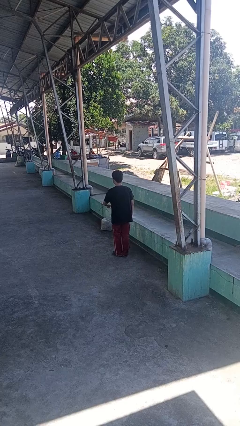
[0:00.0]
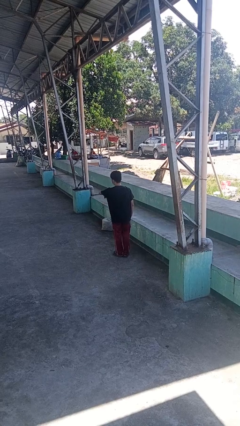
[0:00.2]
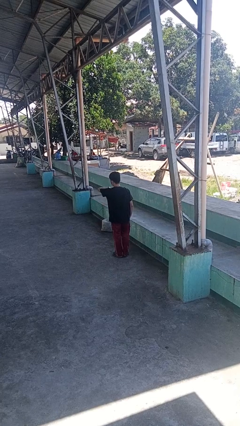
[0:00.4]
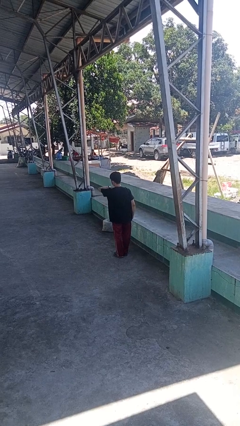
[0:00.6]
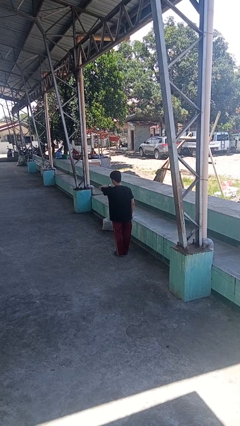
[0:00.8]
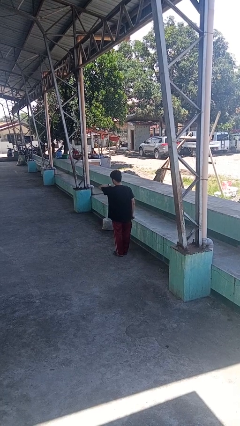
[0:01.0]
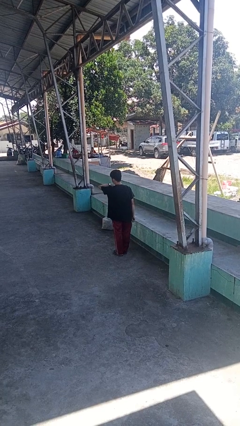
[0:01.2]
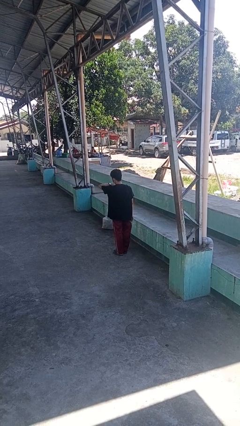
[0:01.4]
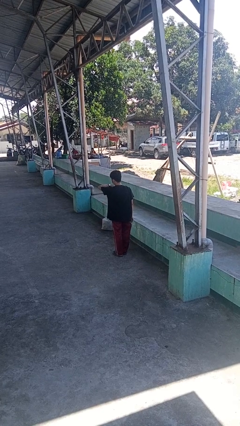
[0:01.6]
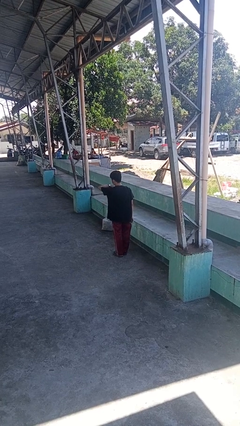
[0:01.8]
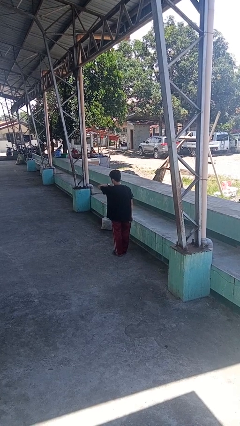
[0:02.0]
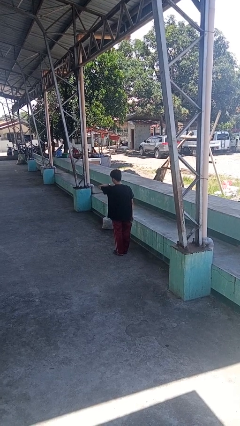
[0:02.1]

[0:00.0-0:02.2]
person looks at wristwatch

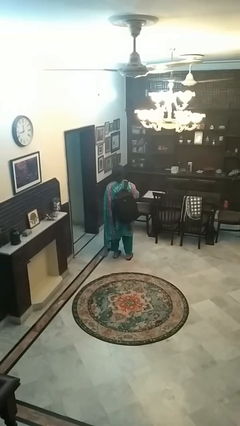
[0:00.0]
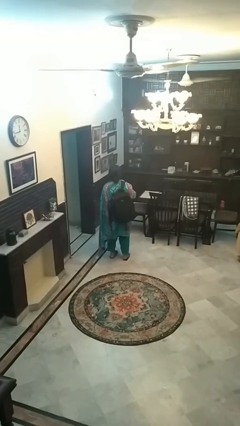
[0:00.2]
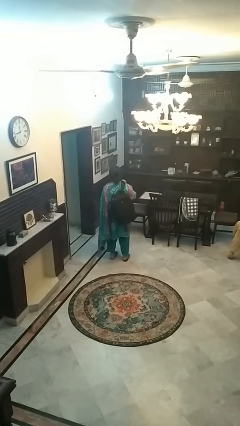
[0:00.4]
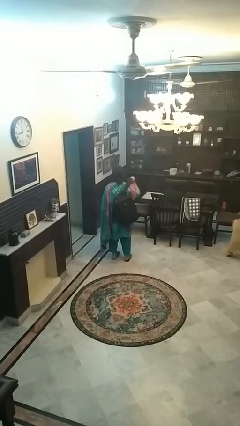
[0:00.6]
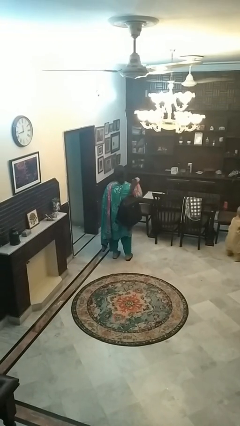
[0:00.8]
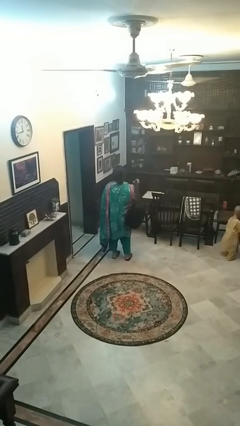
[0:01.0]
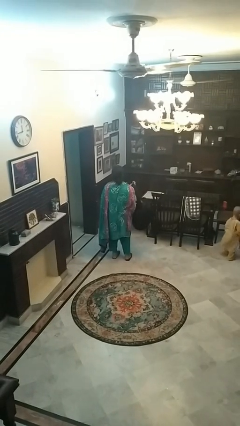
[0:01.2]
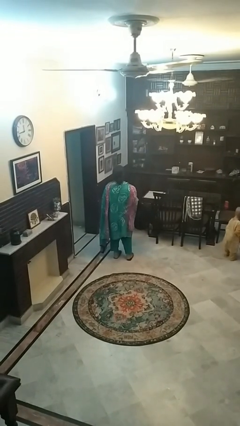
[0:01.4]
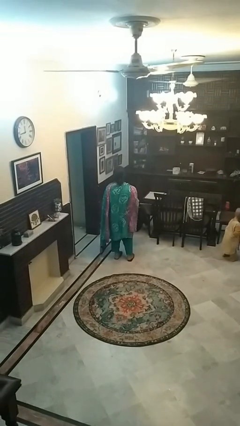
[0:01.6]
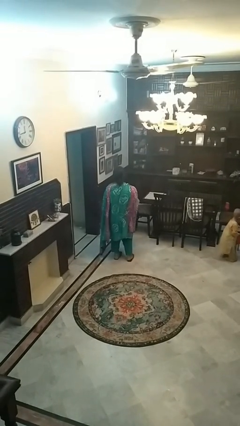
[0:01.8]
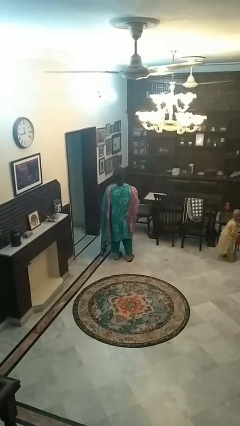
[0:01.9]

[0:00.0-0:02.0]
person takes off backpack

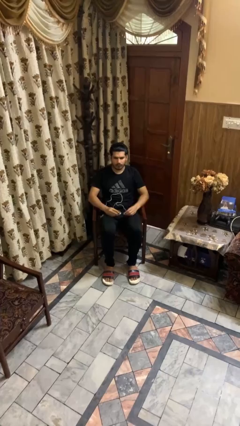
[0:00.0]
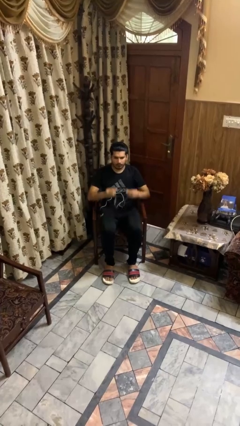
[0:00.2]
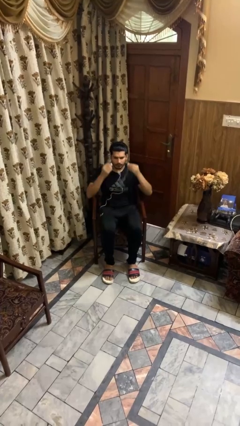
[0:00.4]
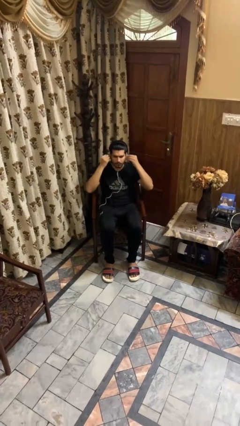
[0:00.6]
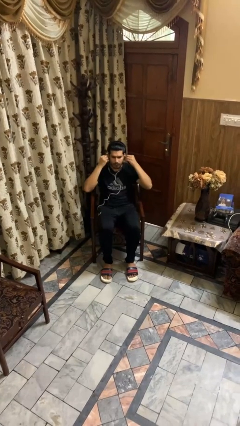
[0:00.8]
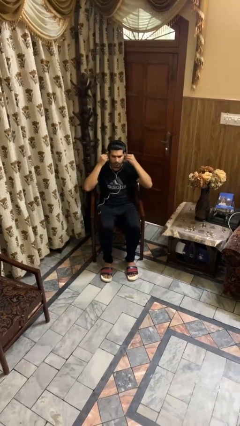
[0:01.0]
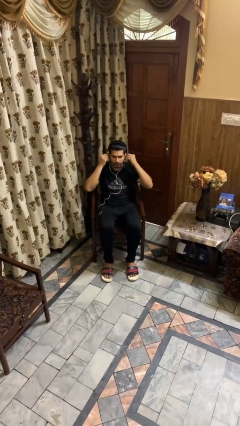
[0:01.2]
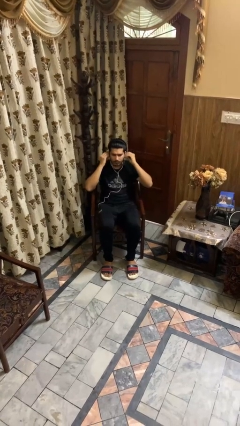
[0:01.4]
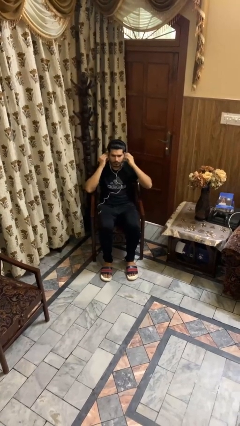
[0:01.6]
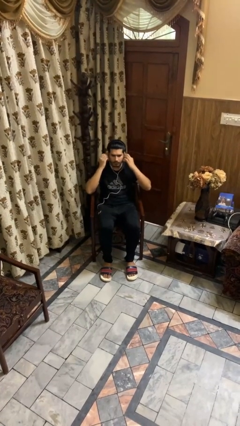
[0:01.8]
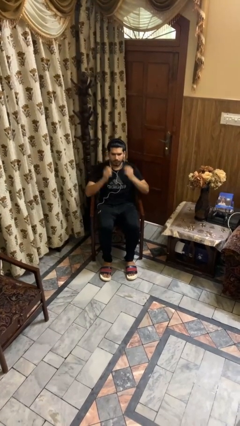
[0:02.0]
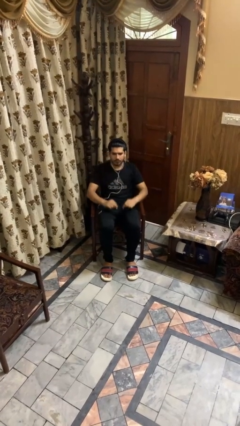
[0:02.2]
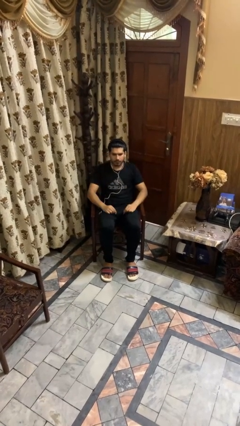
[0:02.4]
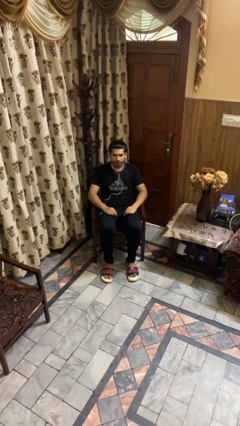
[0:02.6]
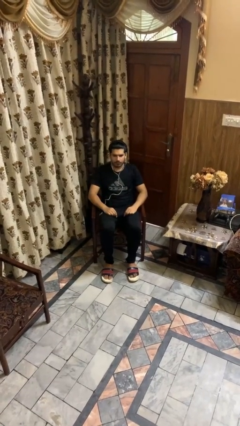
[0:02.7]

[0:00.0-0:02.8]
person puts on headphones

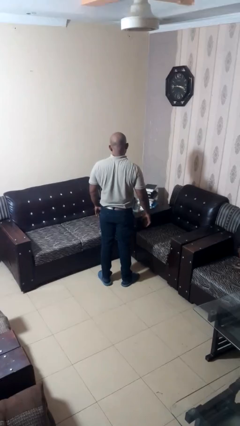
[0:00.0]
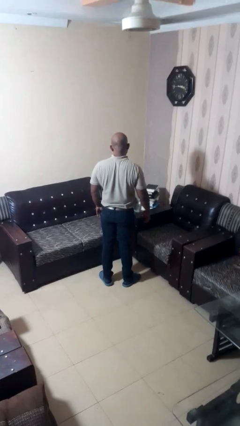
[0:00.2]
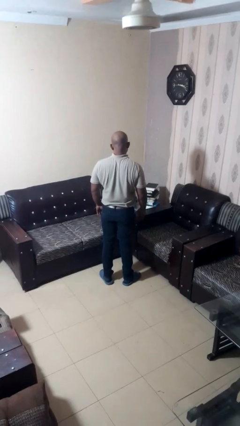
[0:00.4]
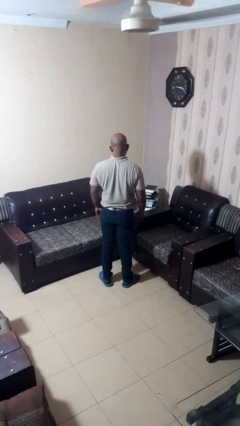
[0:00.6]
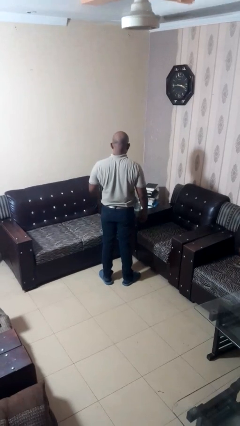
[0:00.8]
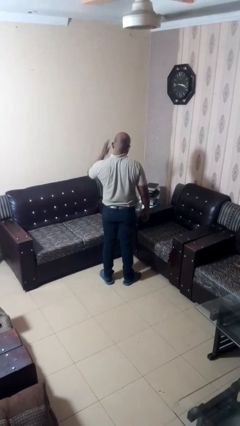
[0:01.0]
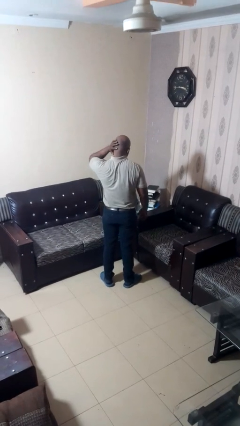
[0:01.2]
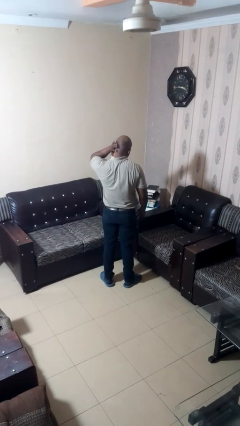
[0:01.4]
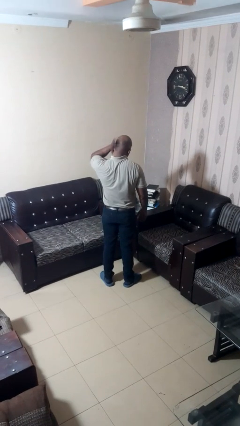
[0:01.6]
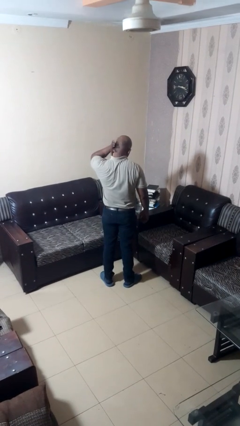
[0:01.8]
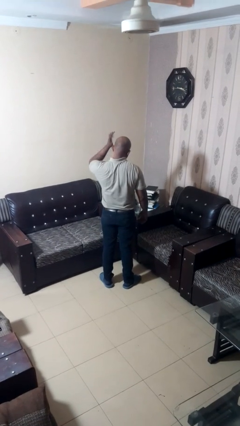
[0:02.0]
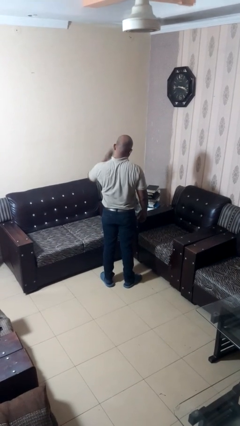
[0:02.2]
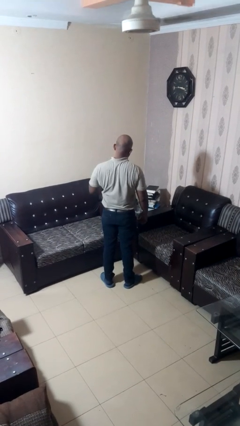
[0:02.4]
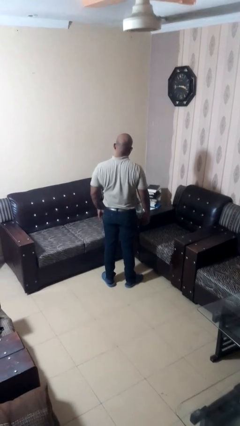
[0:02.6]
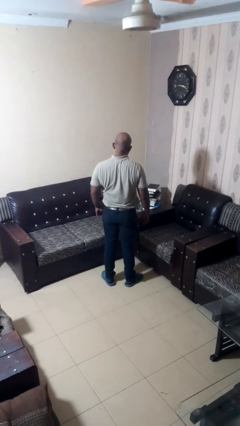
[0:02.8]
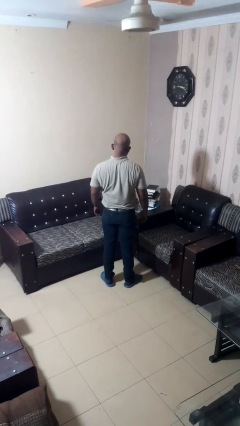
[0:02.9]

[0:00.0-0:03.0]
person touches earlobe

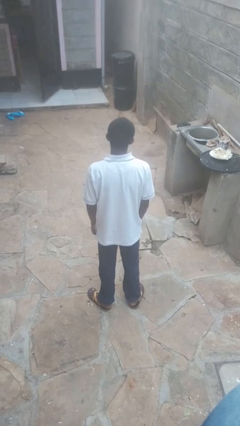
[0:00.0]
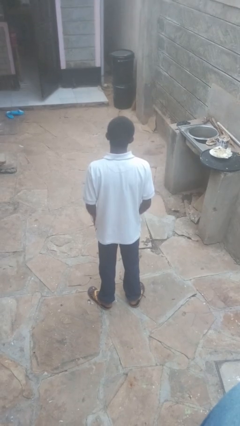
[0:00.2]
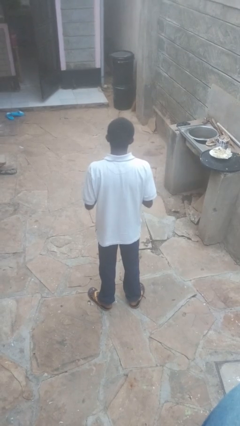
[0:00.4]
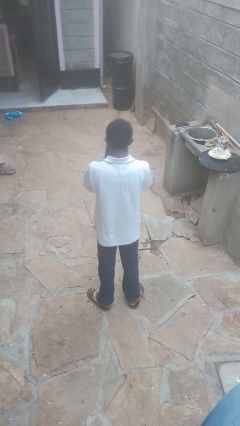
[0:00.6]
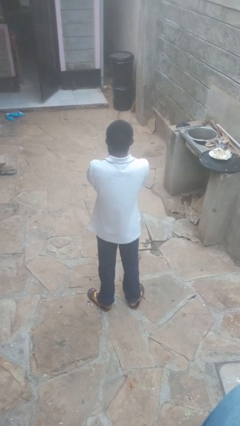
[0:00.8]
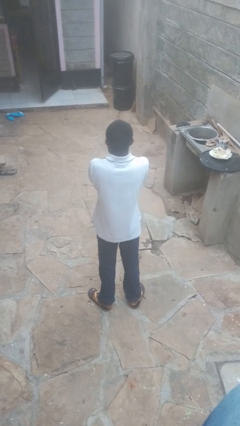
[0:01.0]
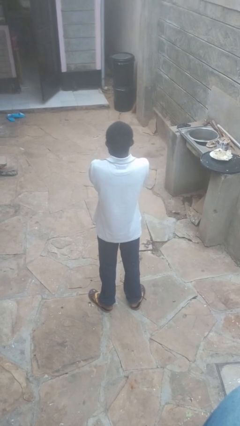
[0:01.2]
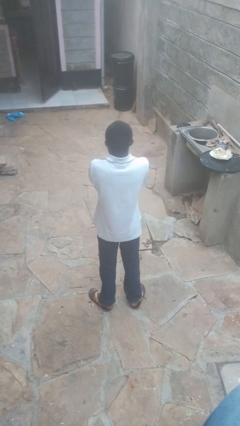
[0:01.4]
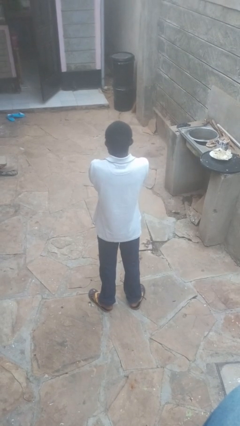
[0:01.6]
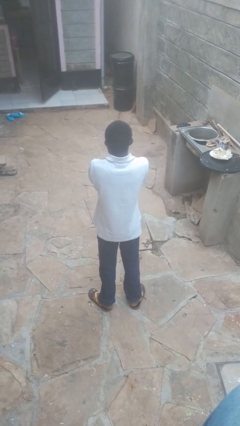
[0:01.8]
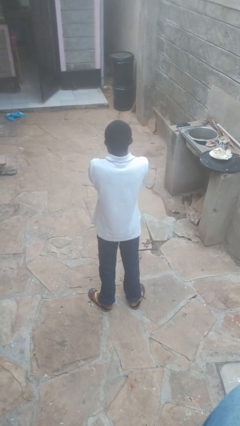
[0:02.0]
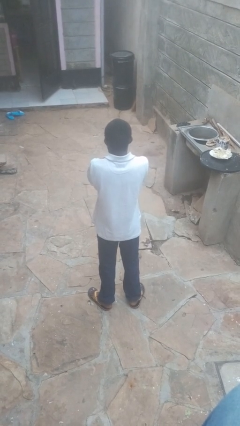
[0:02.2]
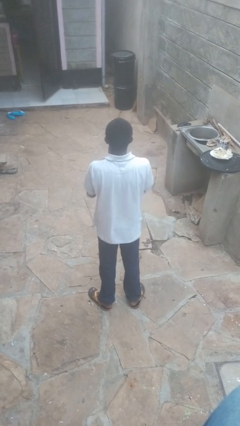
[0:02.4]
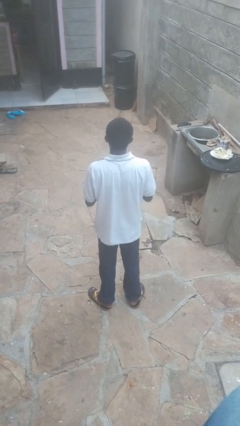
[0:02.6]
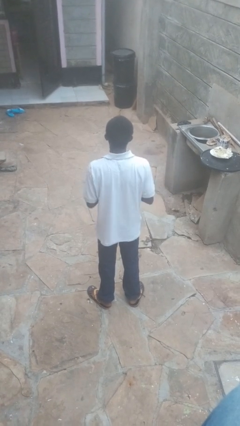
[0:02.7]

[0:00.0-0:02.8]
person covers face with hands

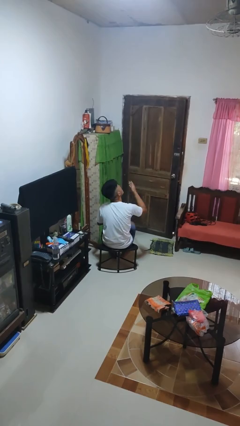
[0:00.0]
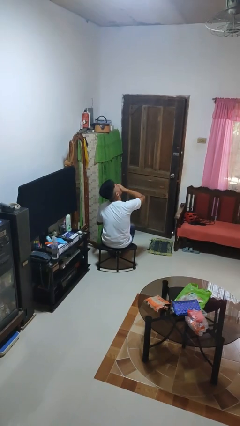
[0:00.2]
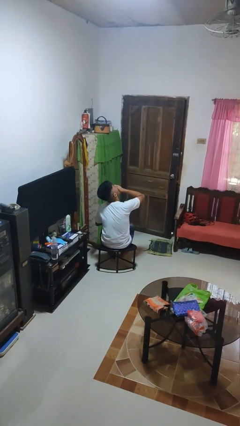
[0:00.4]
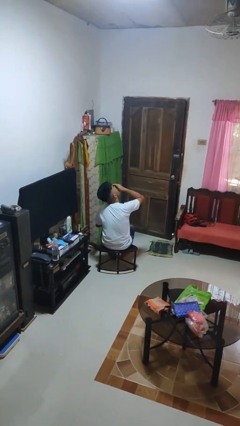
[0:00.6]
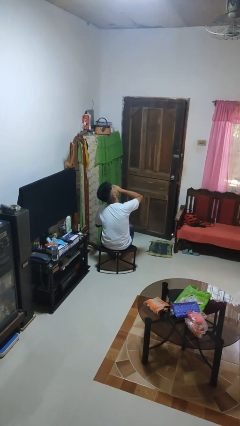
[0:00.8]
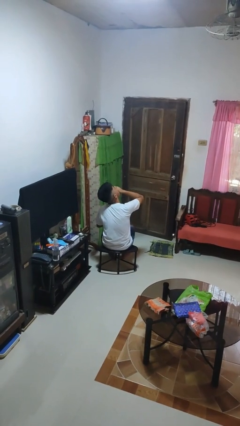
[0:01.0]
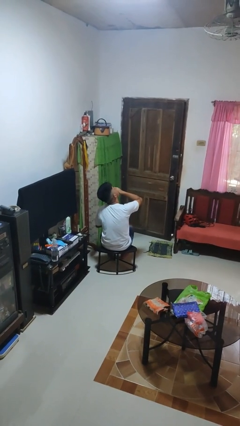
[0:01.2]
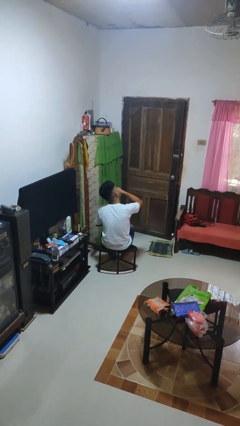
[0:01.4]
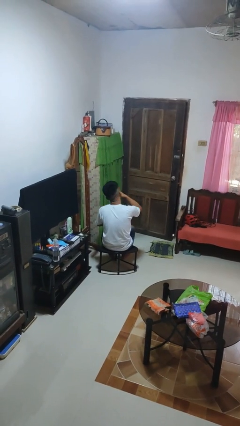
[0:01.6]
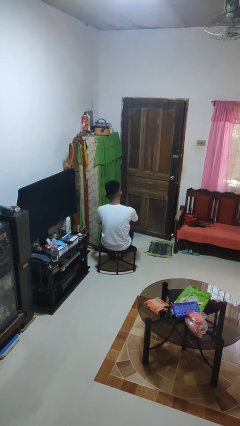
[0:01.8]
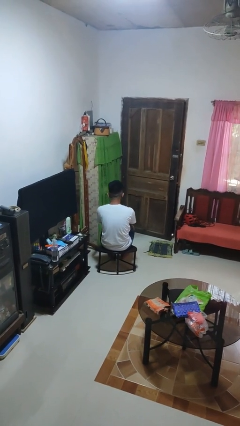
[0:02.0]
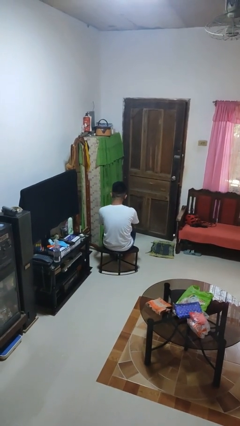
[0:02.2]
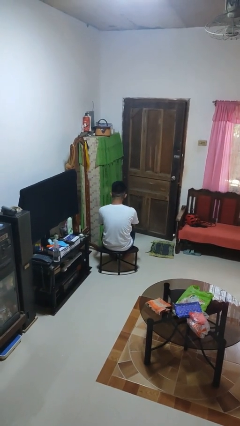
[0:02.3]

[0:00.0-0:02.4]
person yawns

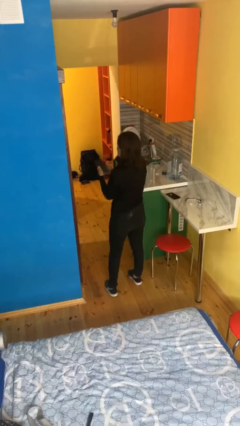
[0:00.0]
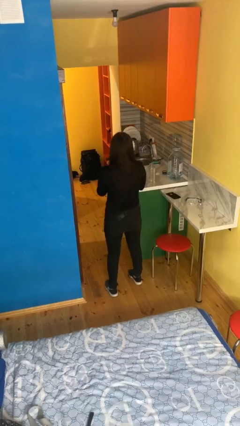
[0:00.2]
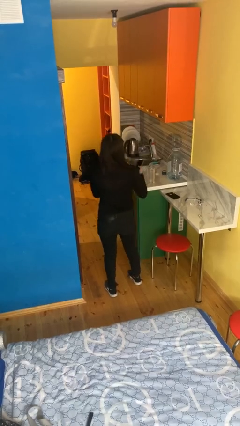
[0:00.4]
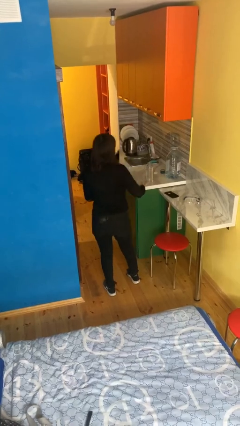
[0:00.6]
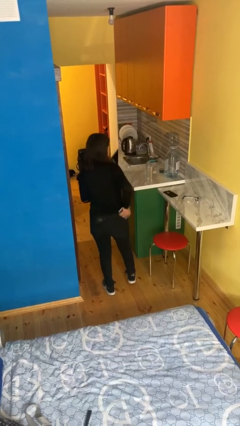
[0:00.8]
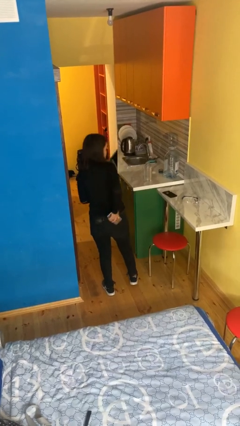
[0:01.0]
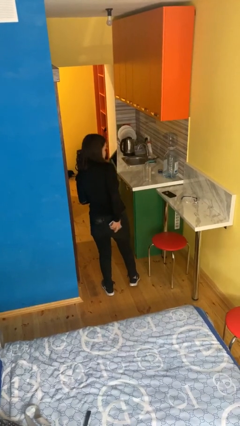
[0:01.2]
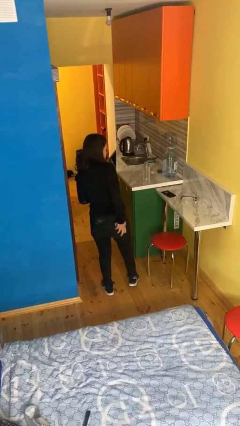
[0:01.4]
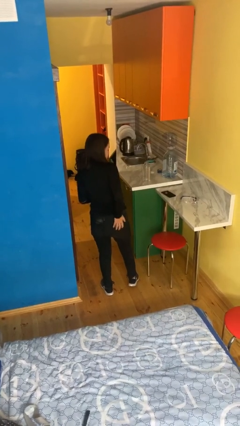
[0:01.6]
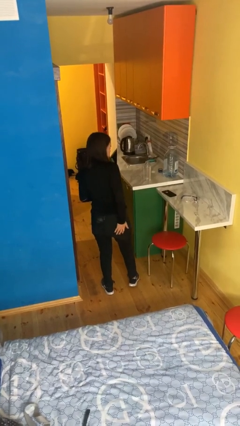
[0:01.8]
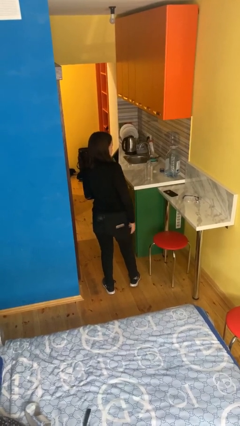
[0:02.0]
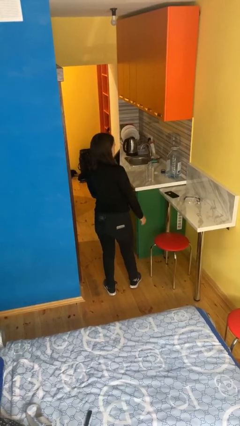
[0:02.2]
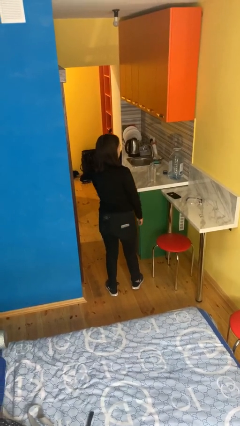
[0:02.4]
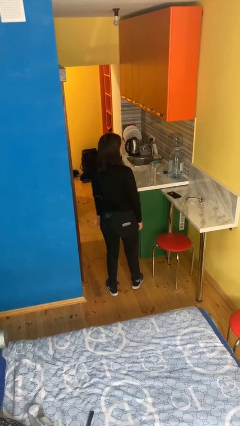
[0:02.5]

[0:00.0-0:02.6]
person puts phone into pocket
